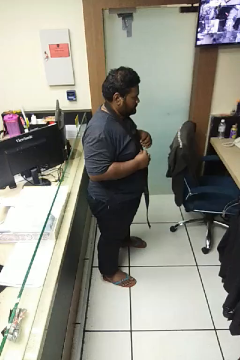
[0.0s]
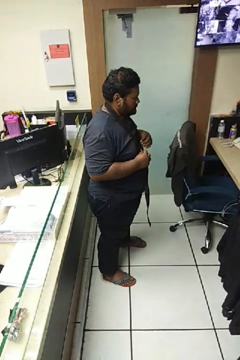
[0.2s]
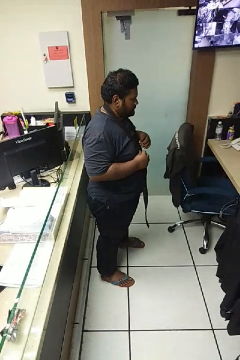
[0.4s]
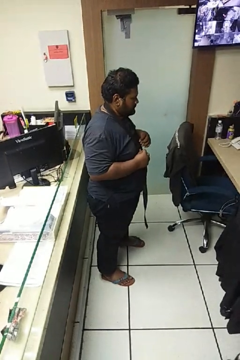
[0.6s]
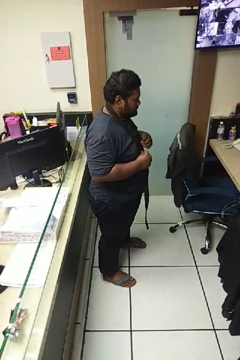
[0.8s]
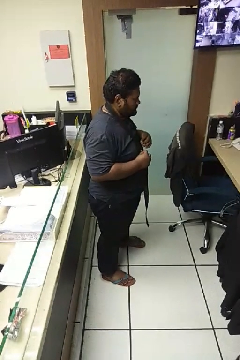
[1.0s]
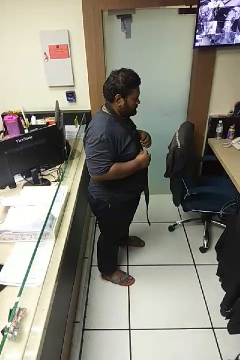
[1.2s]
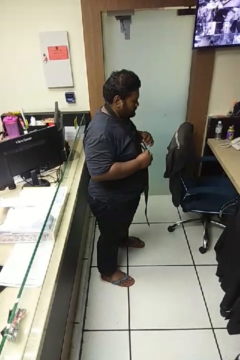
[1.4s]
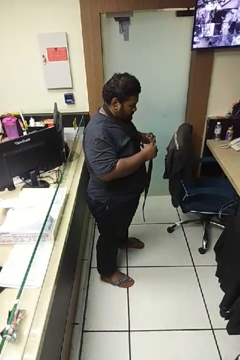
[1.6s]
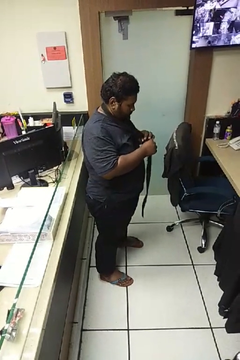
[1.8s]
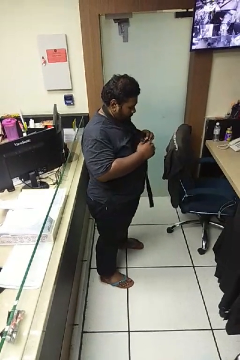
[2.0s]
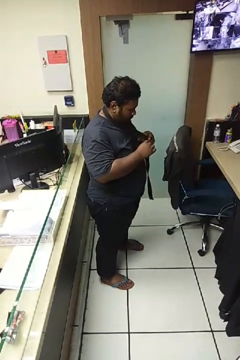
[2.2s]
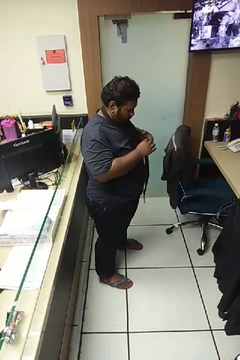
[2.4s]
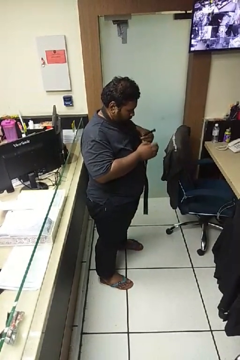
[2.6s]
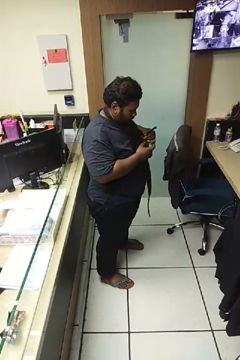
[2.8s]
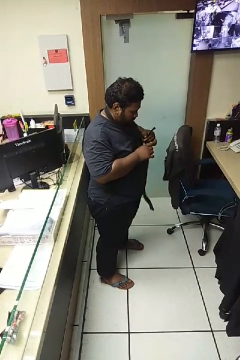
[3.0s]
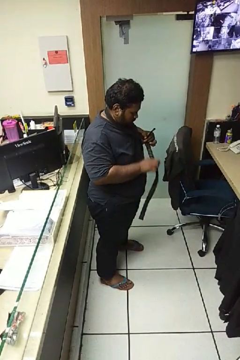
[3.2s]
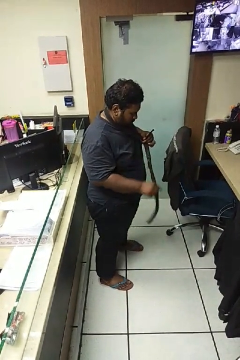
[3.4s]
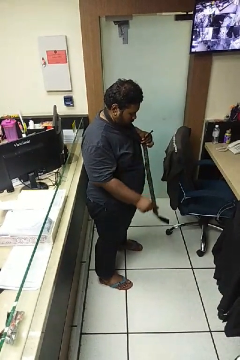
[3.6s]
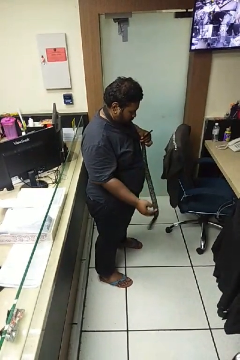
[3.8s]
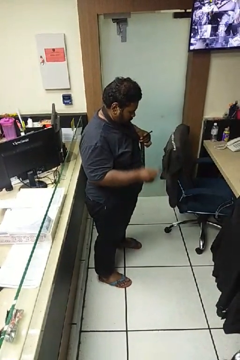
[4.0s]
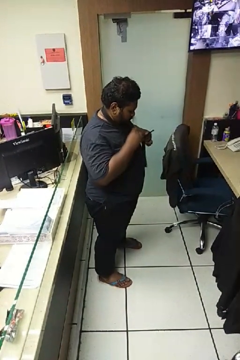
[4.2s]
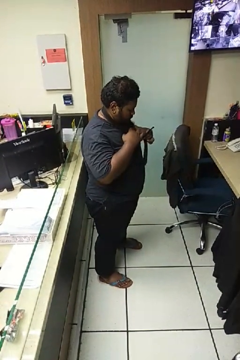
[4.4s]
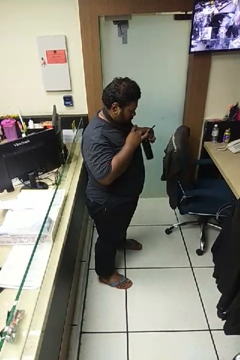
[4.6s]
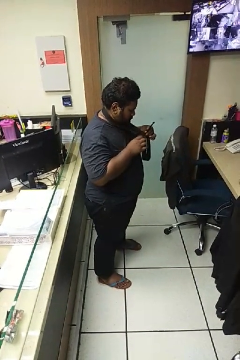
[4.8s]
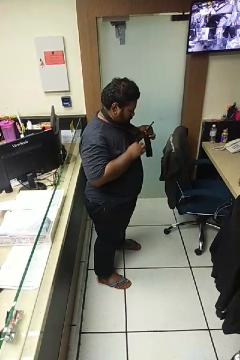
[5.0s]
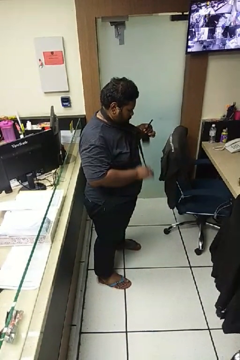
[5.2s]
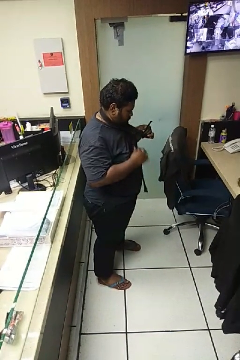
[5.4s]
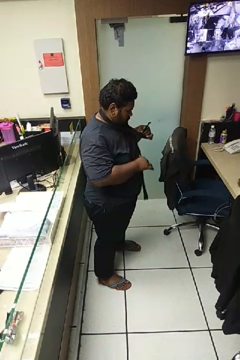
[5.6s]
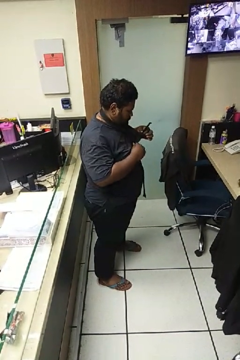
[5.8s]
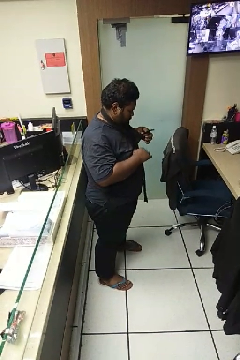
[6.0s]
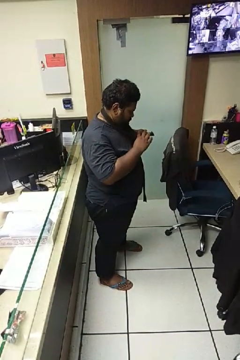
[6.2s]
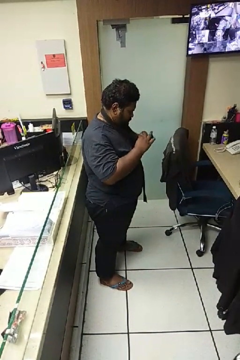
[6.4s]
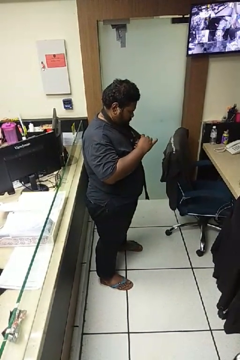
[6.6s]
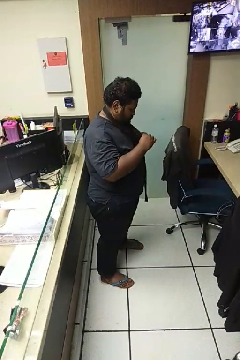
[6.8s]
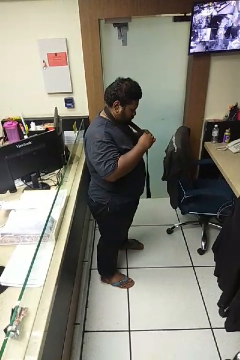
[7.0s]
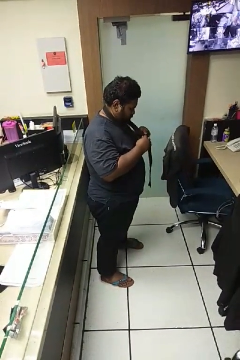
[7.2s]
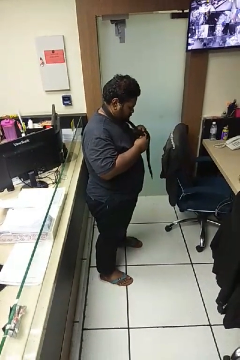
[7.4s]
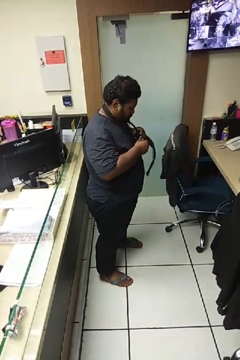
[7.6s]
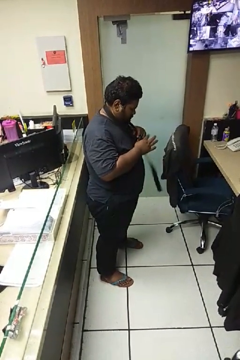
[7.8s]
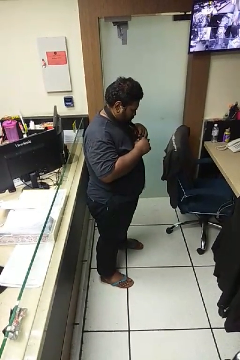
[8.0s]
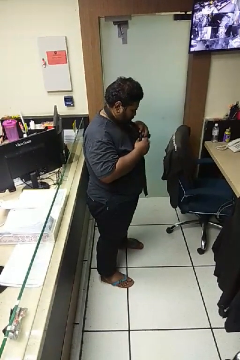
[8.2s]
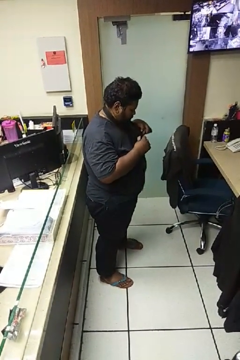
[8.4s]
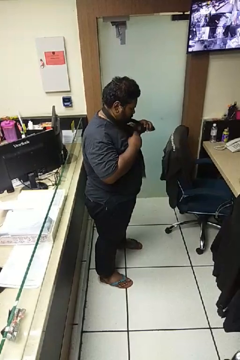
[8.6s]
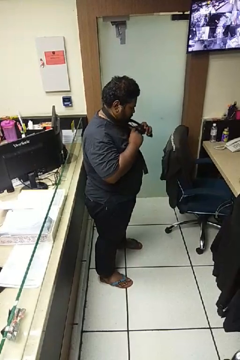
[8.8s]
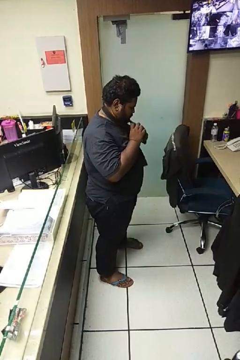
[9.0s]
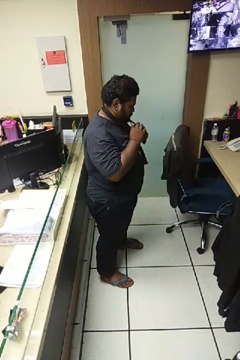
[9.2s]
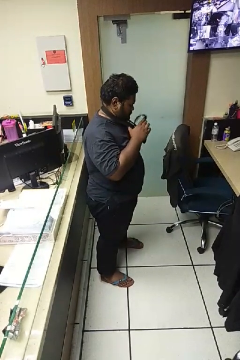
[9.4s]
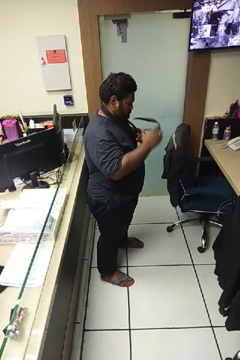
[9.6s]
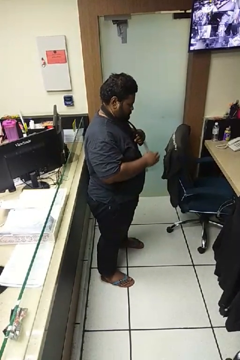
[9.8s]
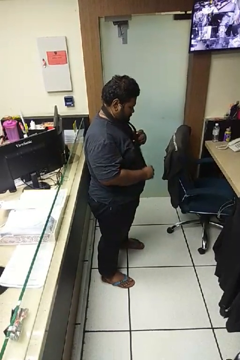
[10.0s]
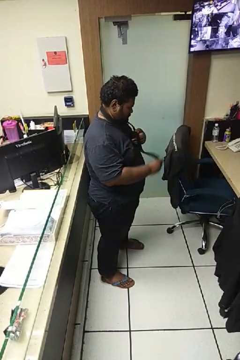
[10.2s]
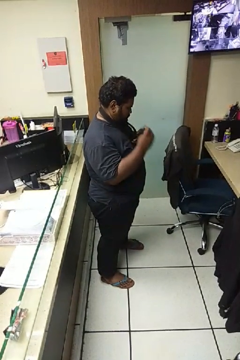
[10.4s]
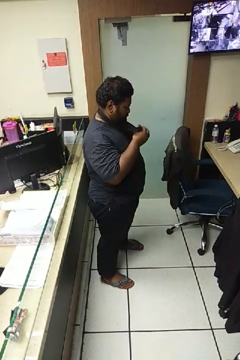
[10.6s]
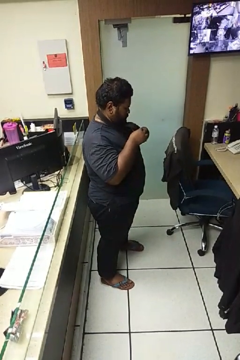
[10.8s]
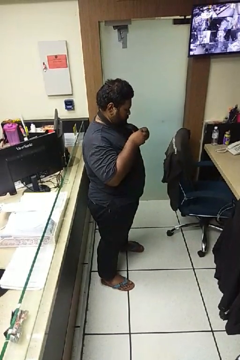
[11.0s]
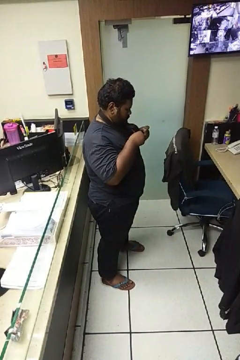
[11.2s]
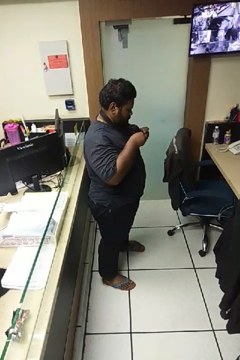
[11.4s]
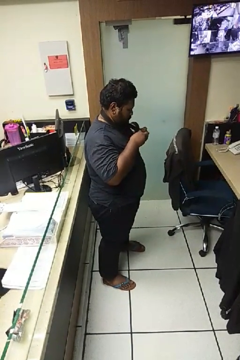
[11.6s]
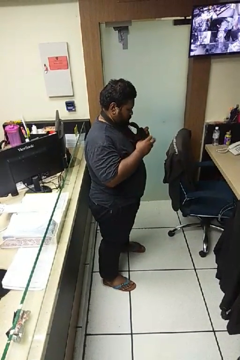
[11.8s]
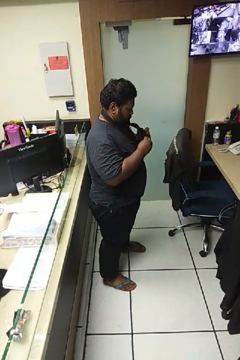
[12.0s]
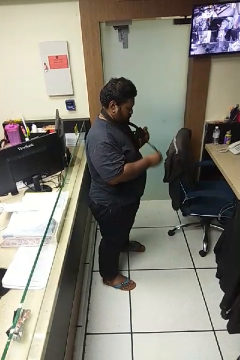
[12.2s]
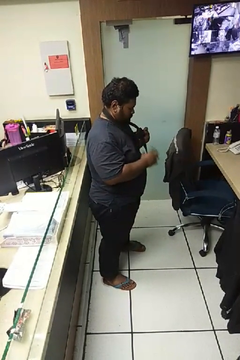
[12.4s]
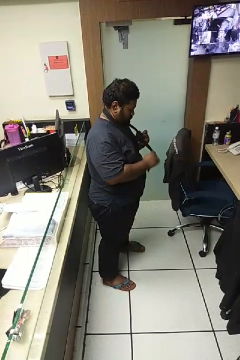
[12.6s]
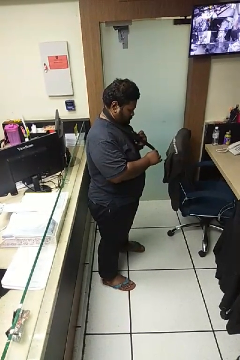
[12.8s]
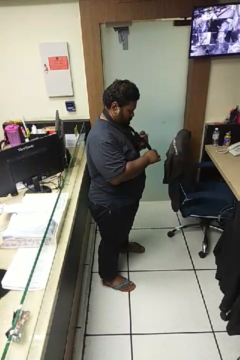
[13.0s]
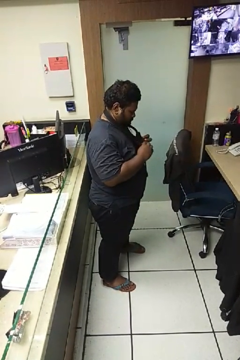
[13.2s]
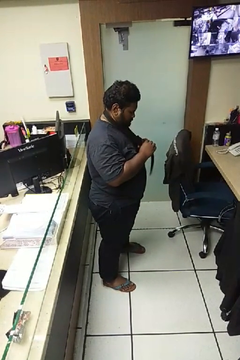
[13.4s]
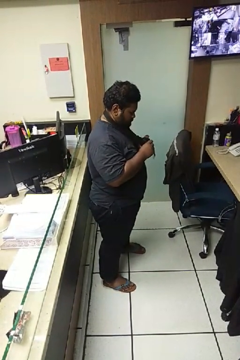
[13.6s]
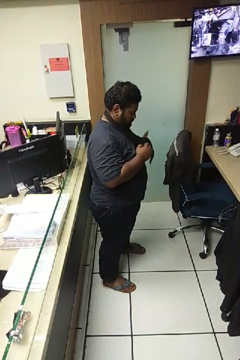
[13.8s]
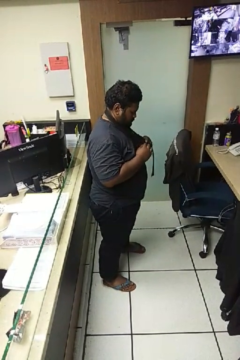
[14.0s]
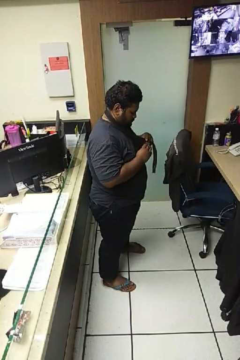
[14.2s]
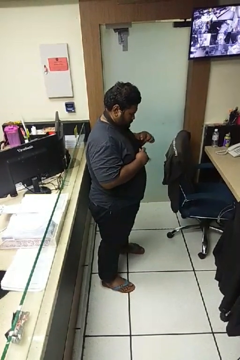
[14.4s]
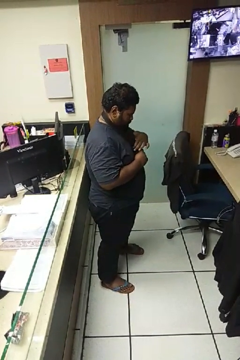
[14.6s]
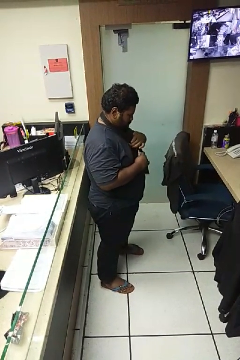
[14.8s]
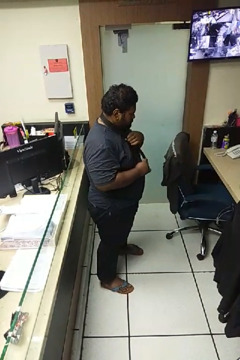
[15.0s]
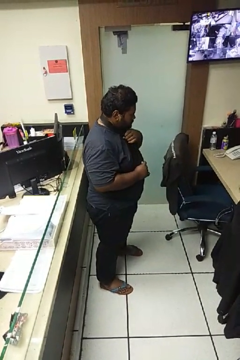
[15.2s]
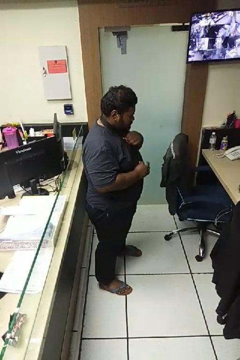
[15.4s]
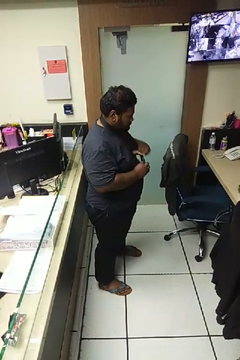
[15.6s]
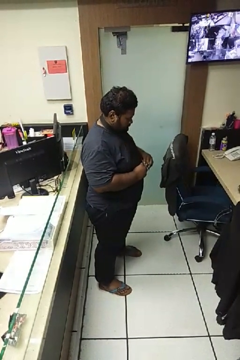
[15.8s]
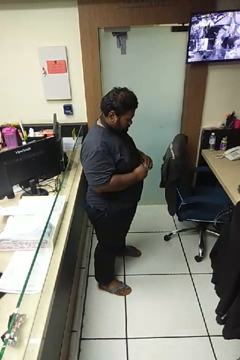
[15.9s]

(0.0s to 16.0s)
person puts on necktie

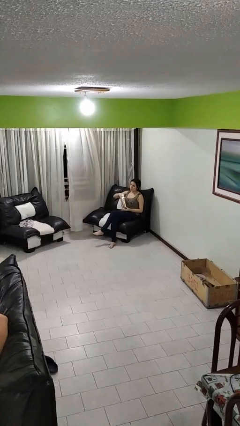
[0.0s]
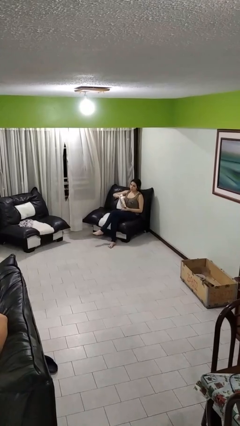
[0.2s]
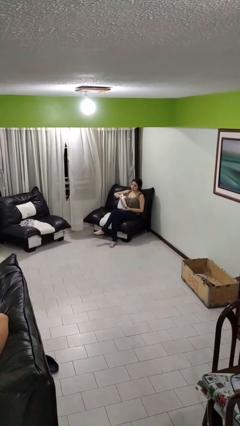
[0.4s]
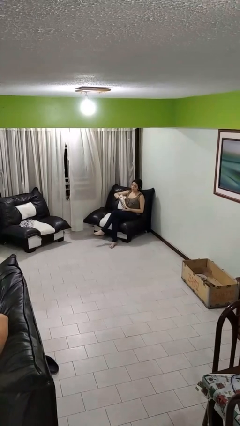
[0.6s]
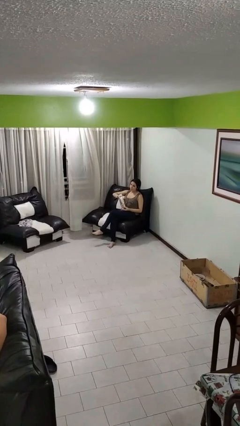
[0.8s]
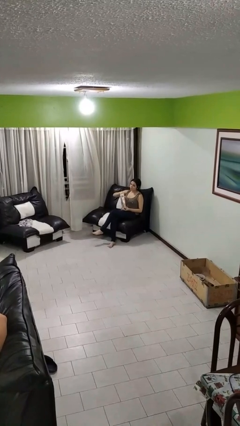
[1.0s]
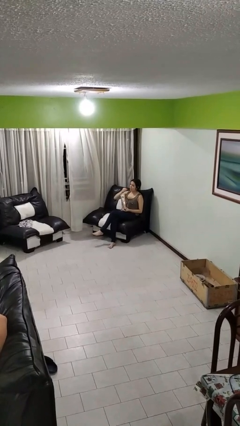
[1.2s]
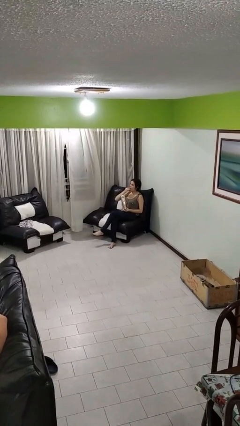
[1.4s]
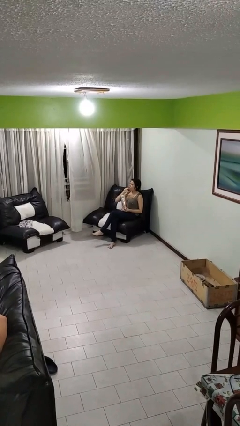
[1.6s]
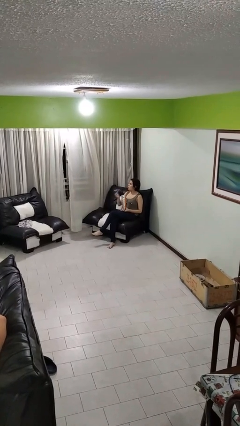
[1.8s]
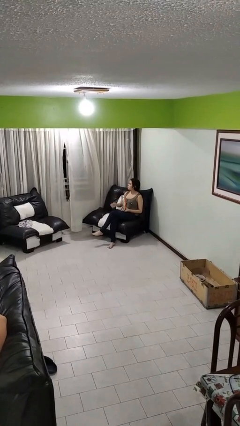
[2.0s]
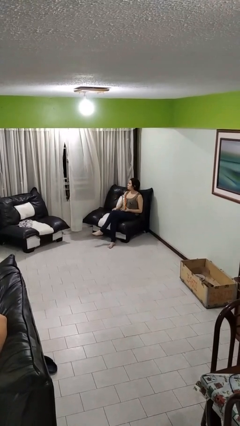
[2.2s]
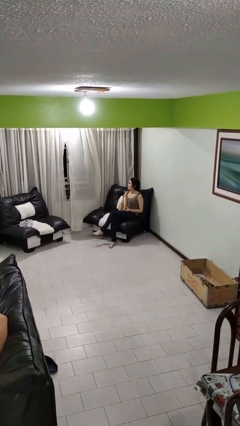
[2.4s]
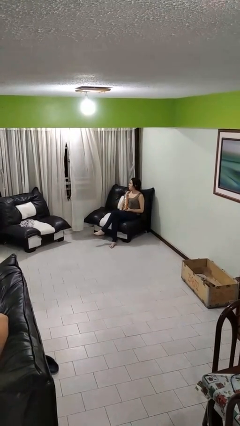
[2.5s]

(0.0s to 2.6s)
person eats snack from bag

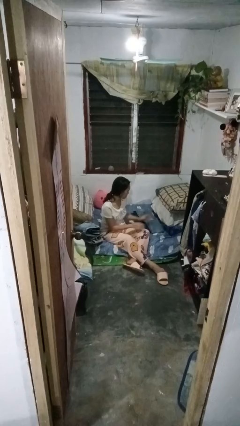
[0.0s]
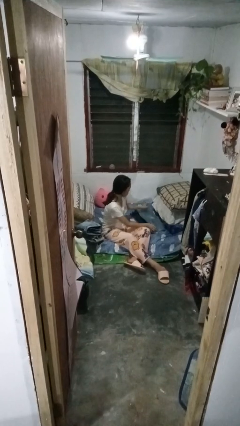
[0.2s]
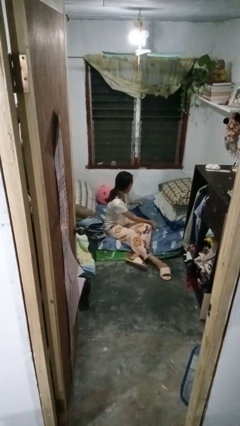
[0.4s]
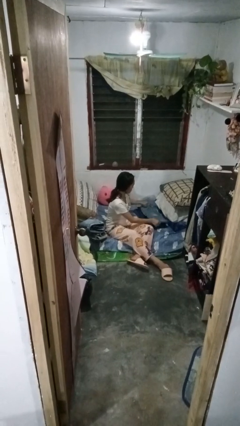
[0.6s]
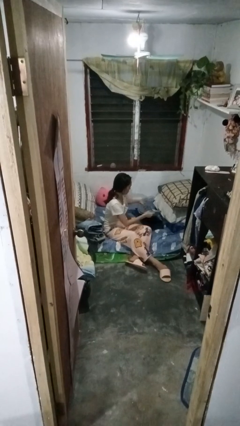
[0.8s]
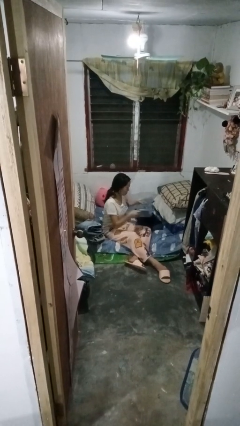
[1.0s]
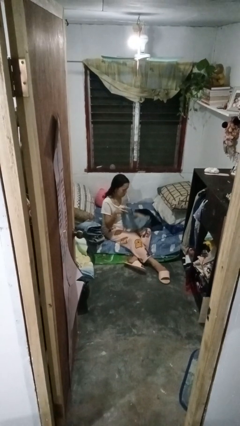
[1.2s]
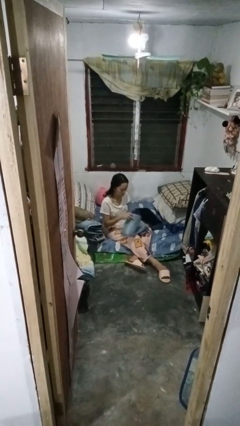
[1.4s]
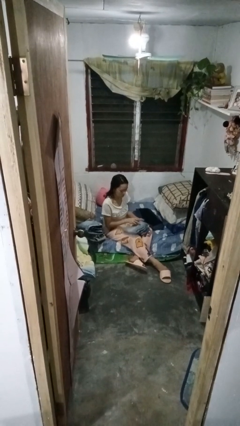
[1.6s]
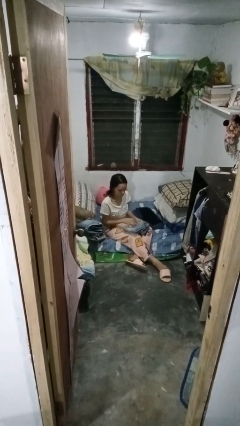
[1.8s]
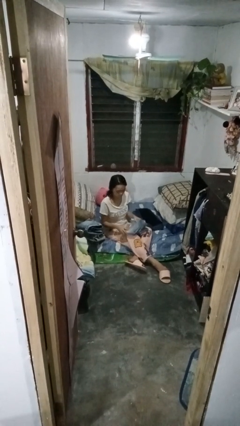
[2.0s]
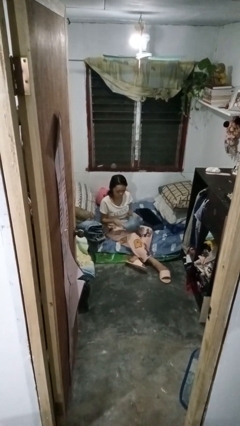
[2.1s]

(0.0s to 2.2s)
person folds pants
